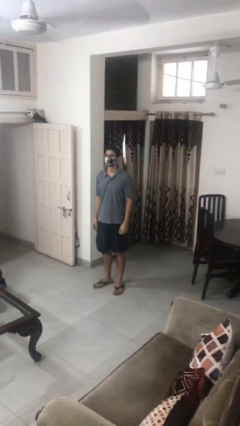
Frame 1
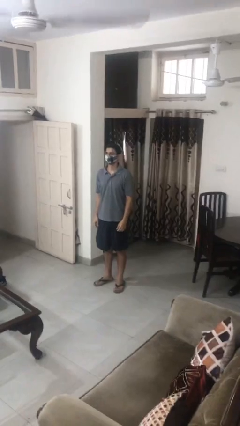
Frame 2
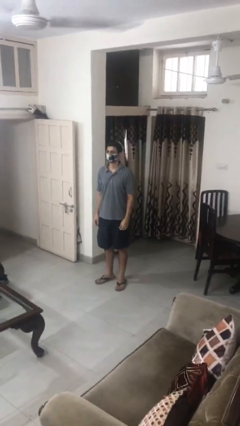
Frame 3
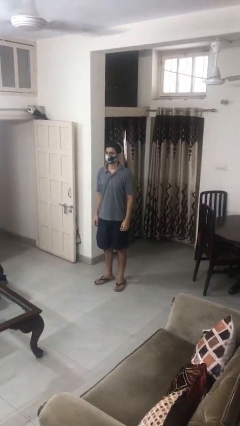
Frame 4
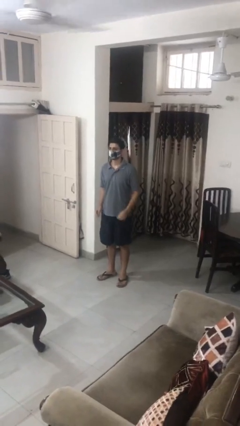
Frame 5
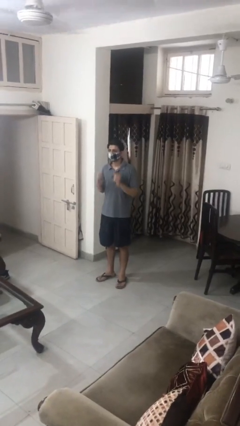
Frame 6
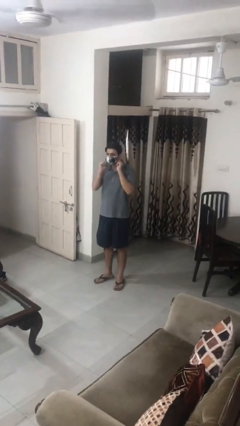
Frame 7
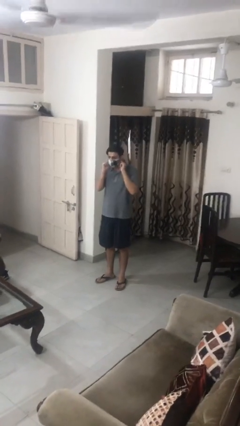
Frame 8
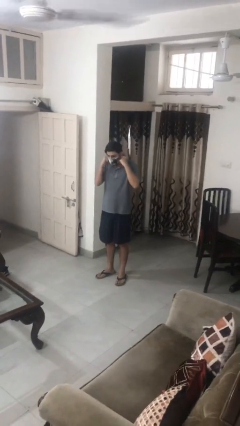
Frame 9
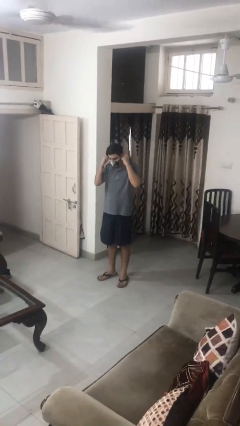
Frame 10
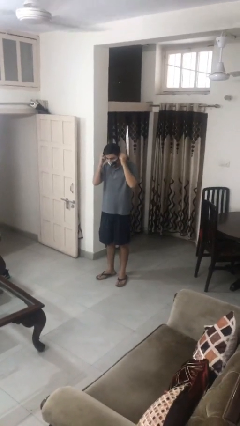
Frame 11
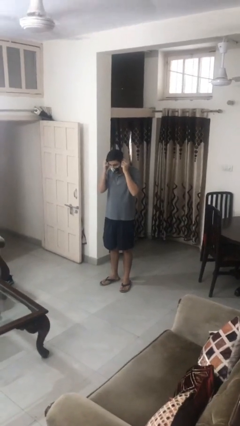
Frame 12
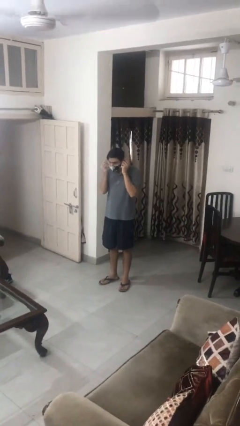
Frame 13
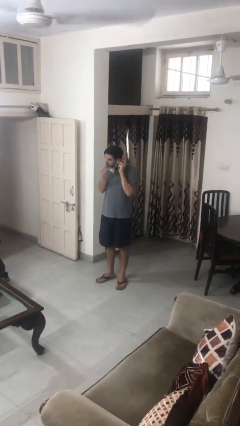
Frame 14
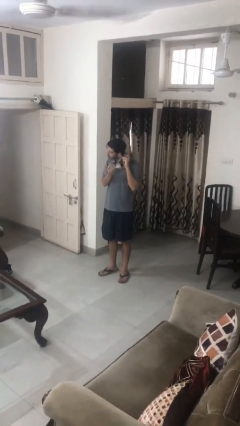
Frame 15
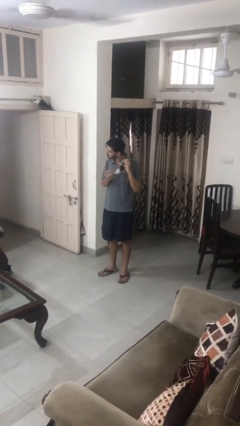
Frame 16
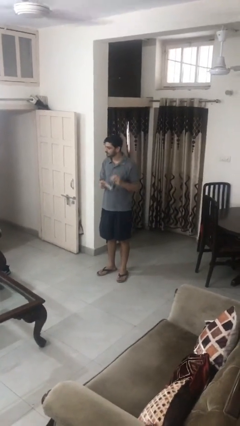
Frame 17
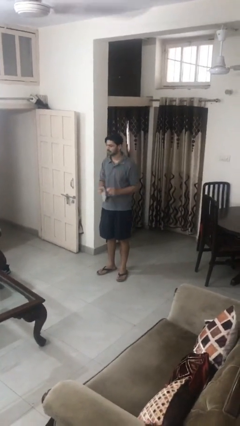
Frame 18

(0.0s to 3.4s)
person takes off facemask

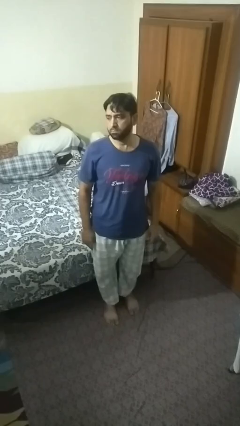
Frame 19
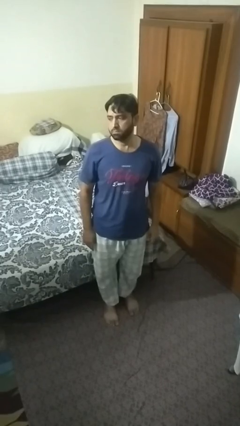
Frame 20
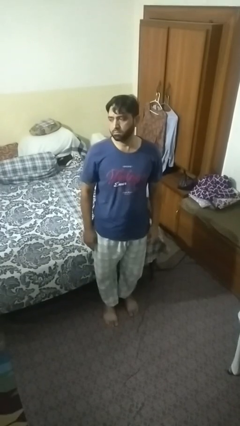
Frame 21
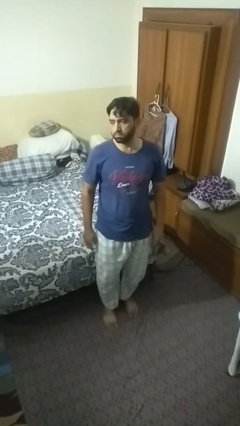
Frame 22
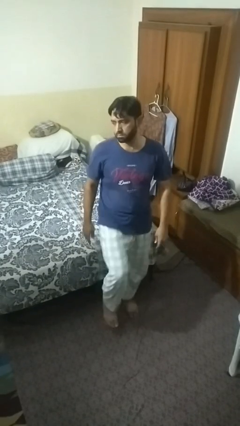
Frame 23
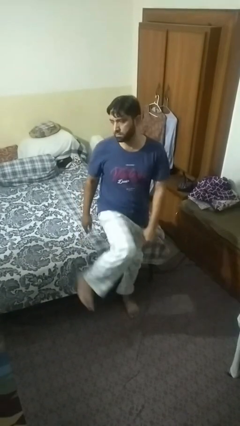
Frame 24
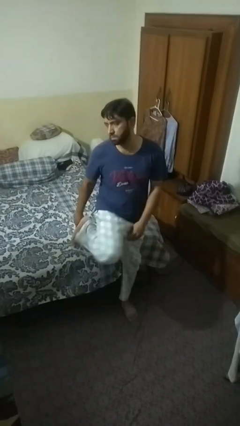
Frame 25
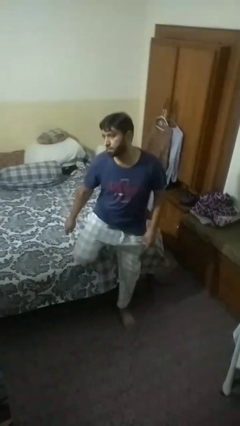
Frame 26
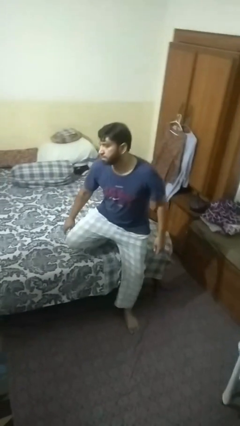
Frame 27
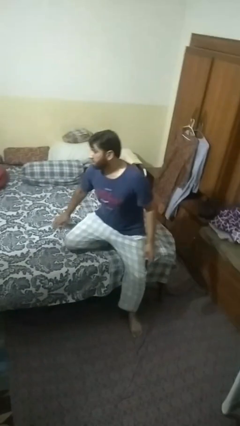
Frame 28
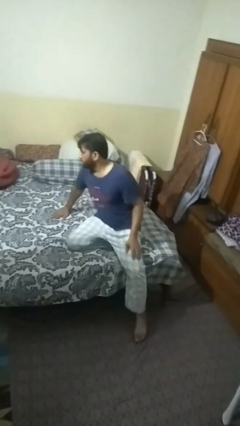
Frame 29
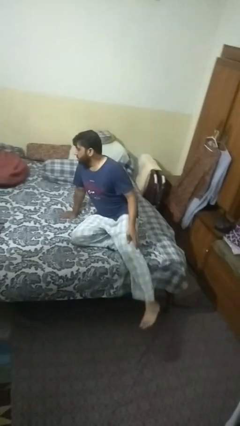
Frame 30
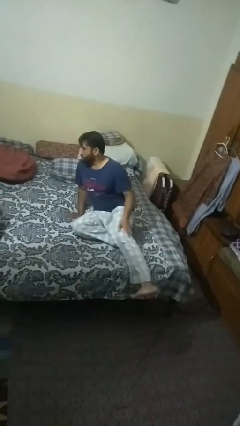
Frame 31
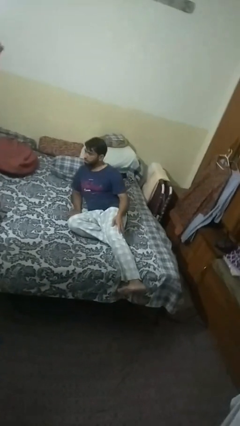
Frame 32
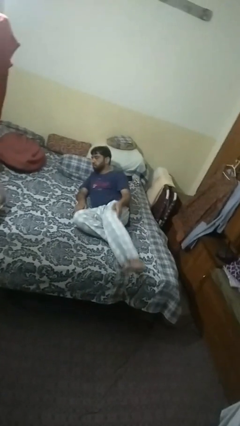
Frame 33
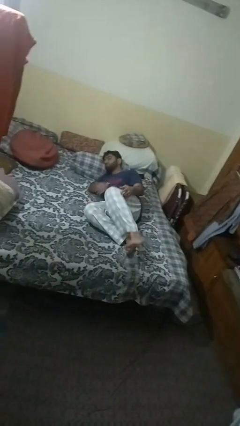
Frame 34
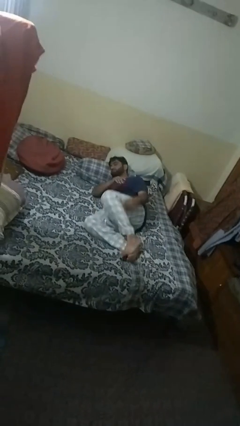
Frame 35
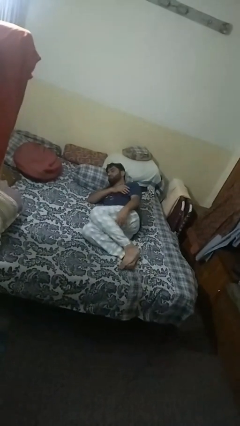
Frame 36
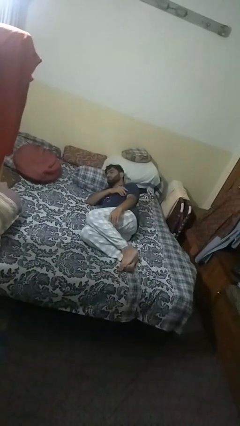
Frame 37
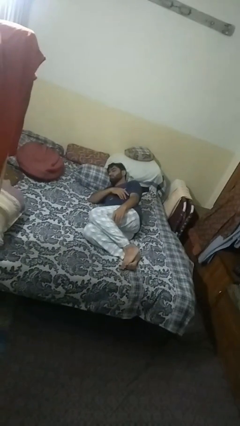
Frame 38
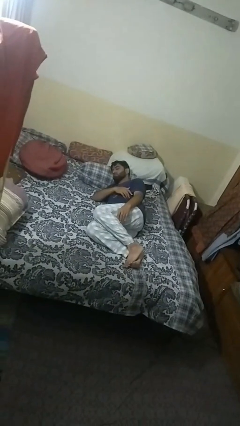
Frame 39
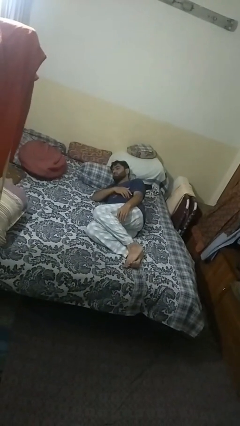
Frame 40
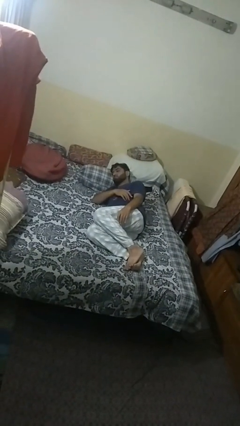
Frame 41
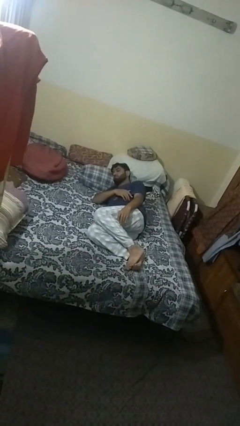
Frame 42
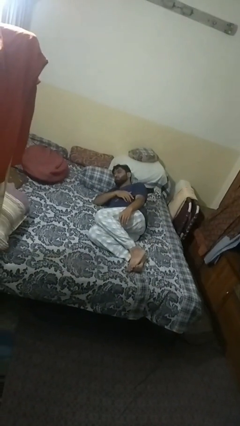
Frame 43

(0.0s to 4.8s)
person lies down on bed

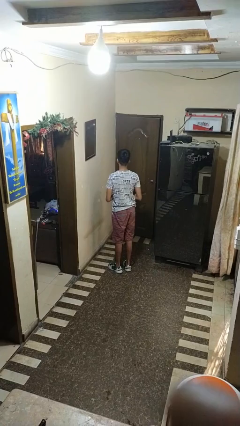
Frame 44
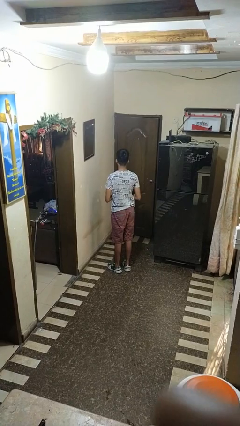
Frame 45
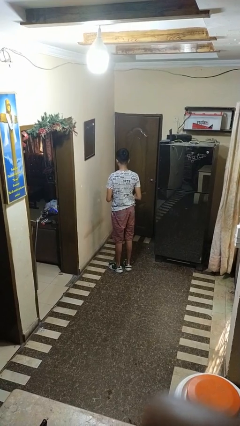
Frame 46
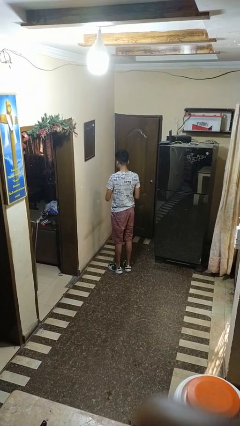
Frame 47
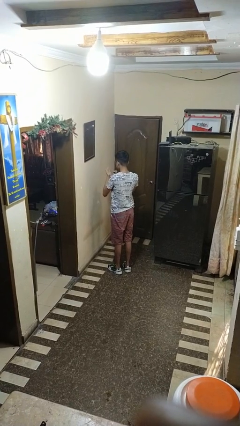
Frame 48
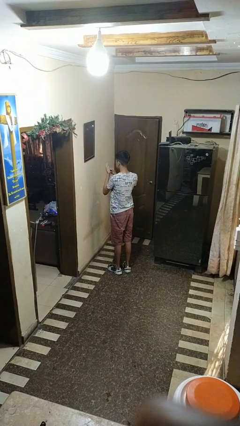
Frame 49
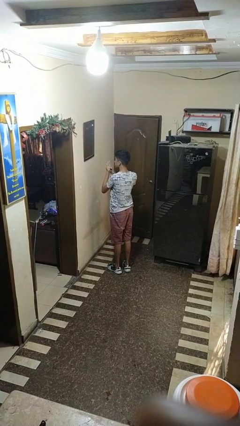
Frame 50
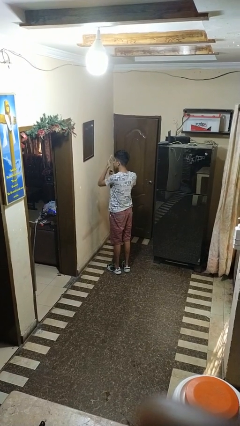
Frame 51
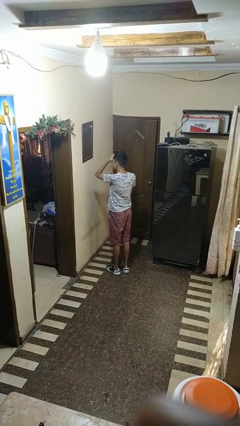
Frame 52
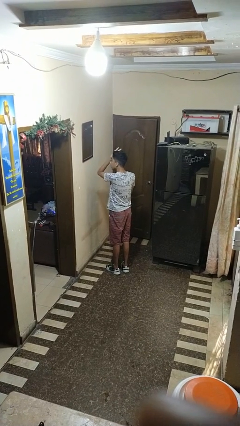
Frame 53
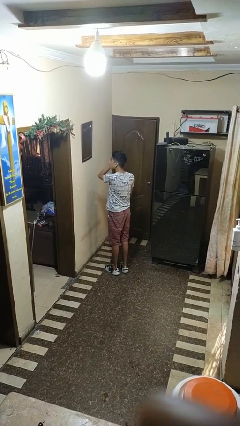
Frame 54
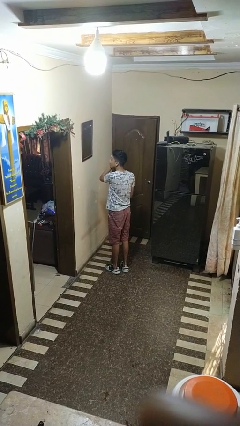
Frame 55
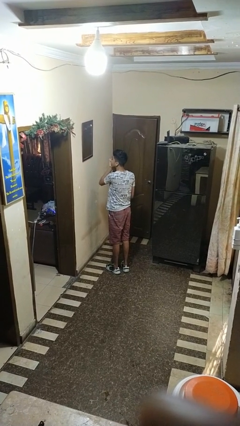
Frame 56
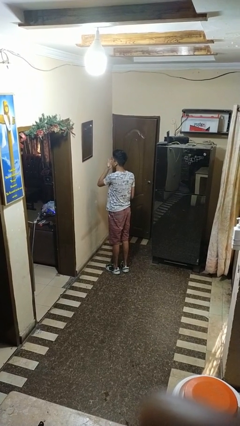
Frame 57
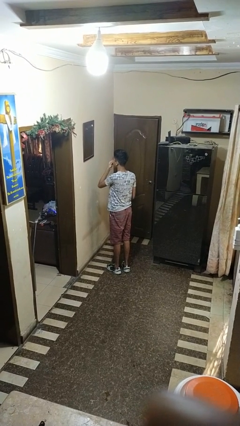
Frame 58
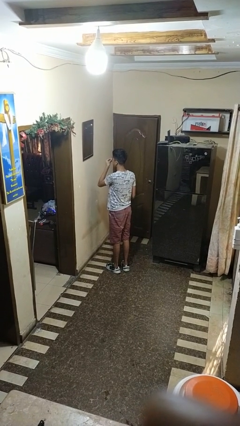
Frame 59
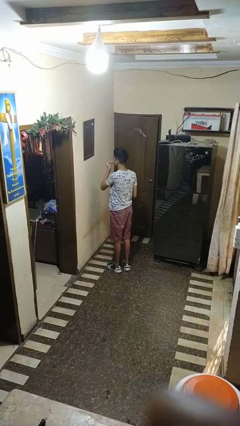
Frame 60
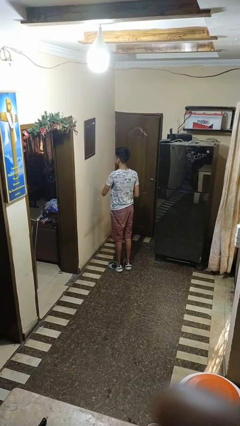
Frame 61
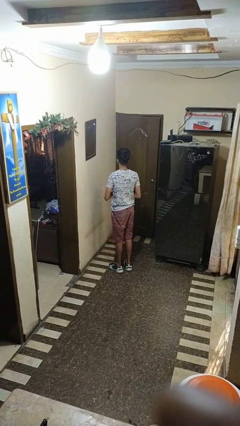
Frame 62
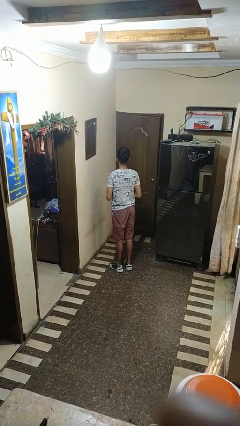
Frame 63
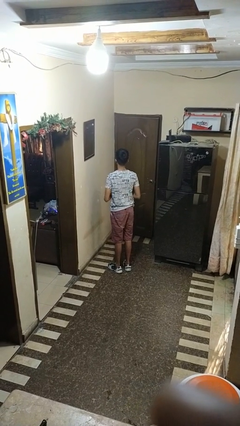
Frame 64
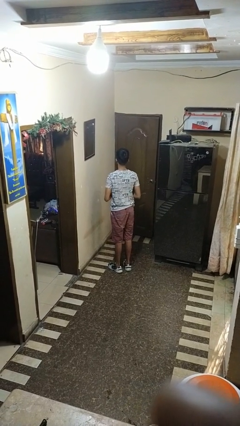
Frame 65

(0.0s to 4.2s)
person applies foundation makeup

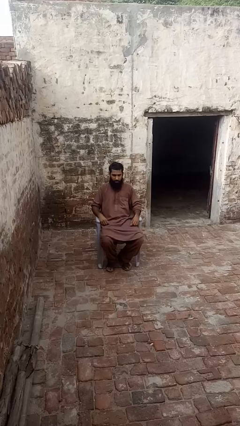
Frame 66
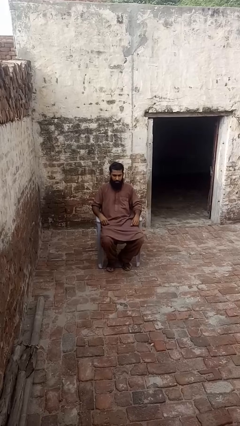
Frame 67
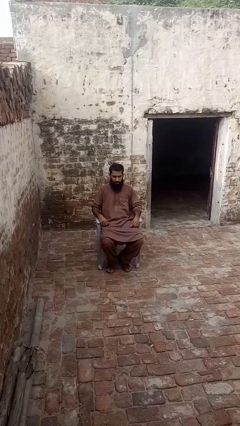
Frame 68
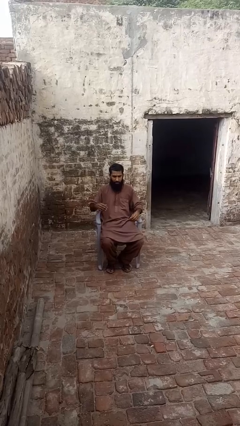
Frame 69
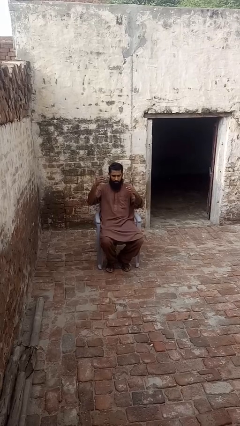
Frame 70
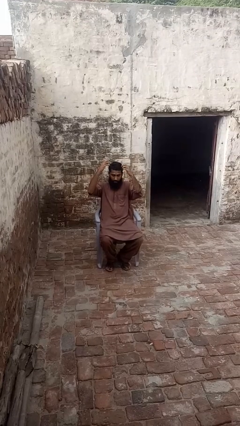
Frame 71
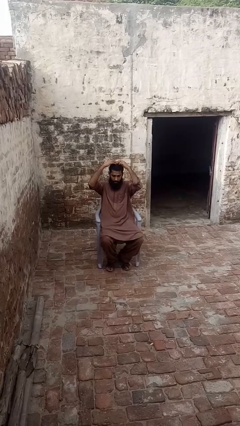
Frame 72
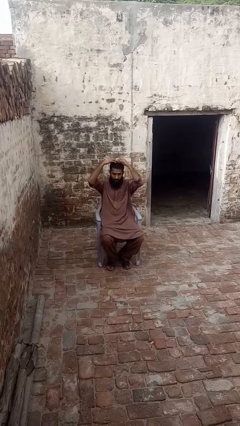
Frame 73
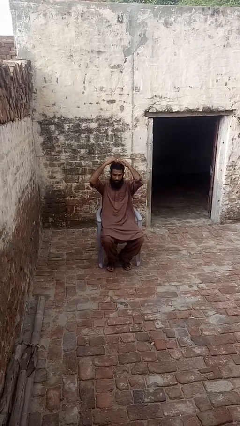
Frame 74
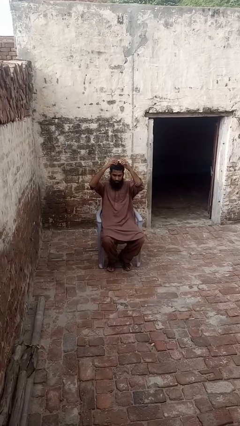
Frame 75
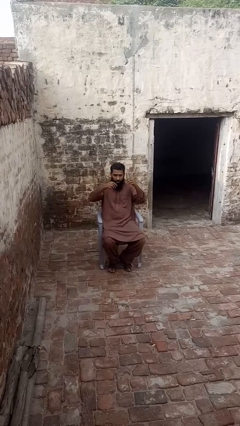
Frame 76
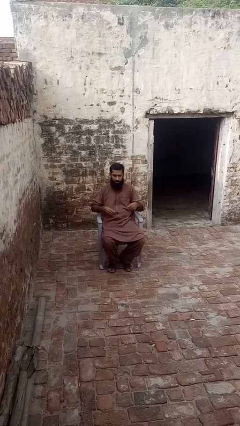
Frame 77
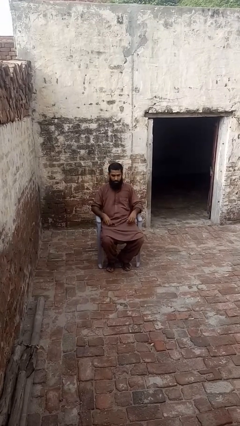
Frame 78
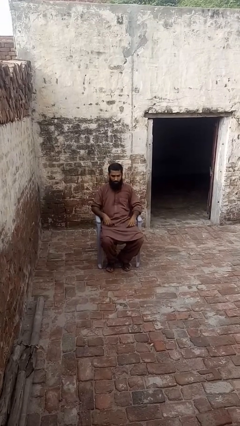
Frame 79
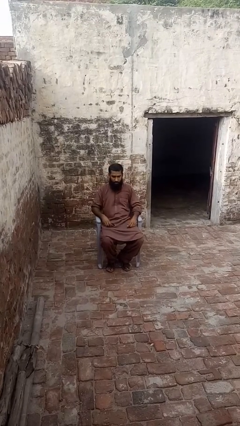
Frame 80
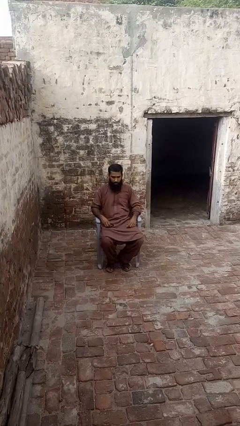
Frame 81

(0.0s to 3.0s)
person takes off hairtie

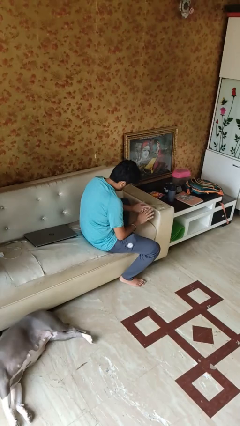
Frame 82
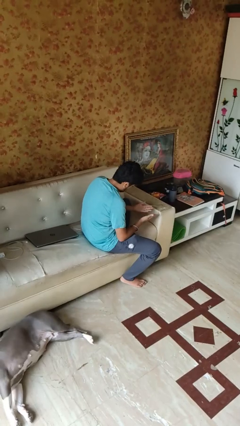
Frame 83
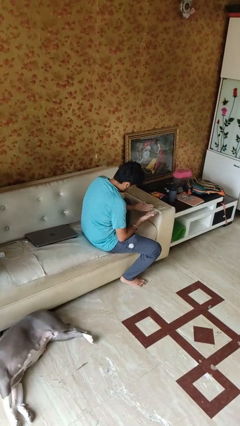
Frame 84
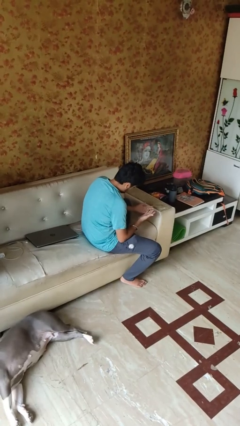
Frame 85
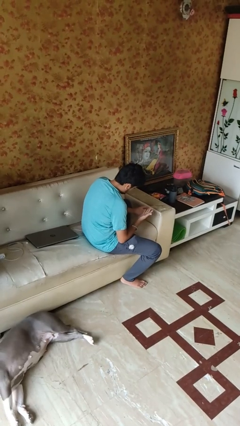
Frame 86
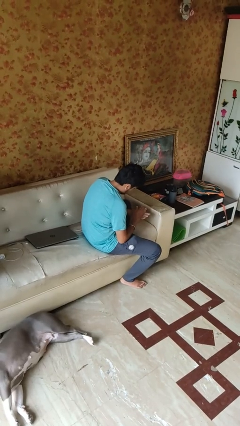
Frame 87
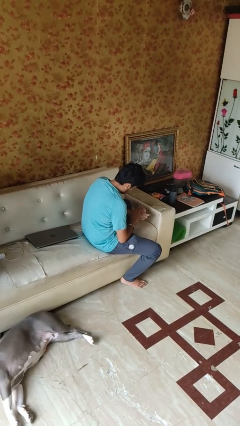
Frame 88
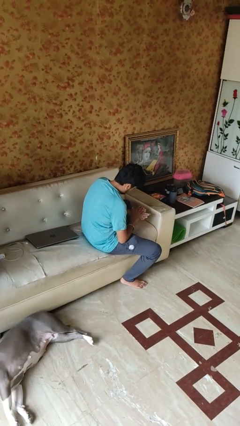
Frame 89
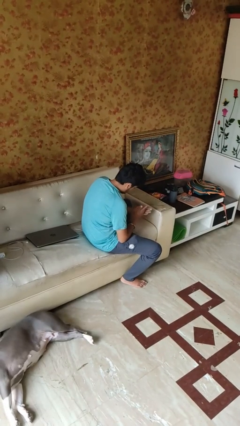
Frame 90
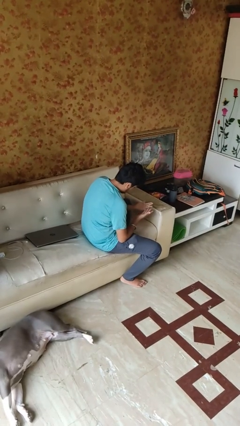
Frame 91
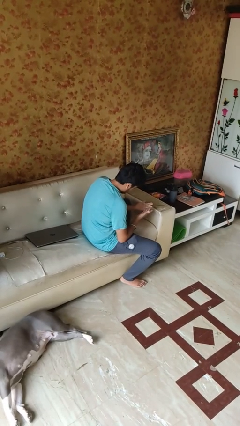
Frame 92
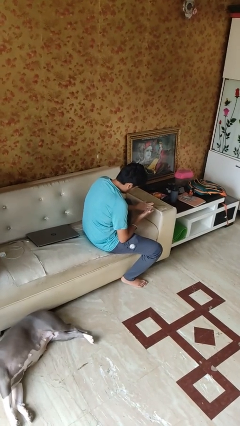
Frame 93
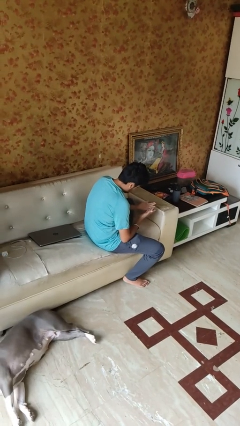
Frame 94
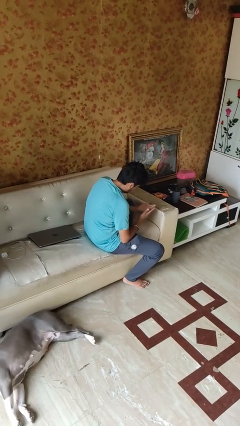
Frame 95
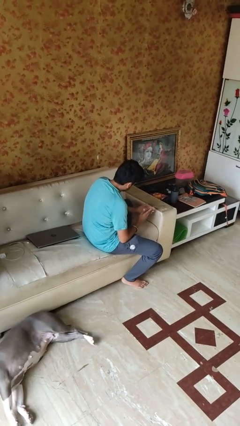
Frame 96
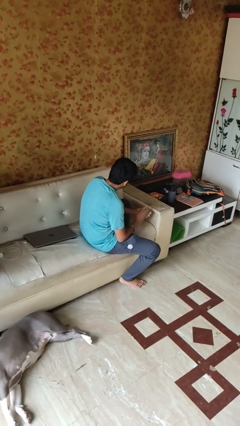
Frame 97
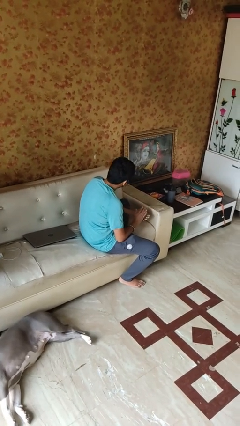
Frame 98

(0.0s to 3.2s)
person looks at hands in lap
